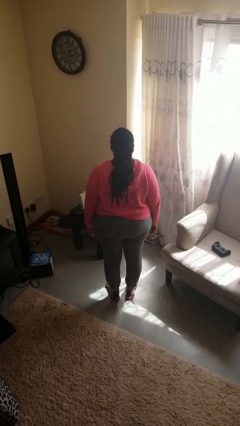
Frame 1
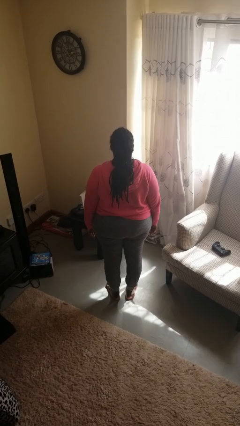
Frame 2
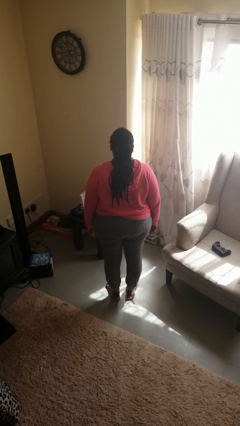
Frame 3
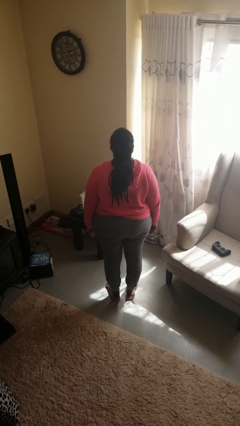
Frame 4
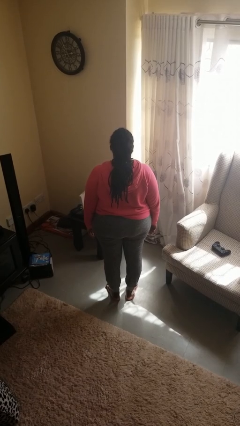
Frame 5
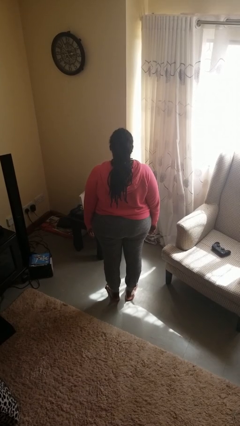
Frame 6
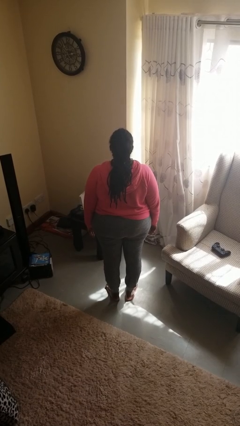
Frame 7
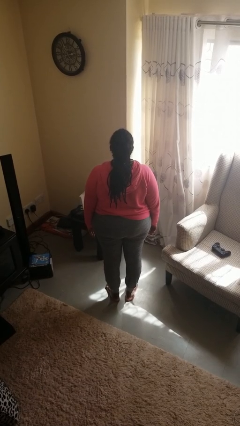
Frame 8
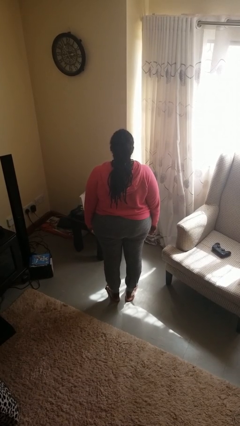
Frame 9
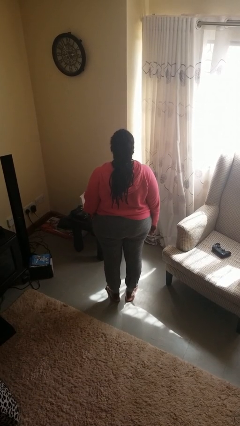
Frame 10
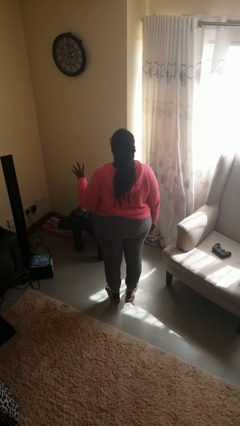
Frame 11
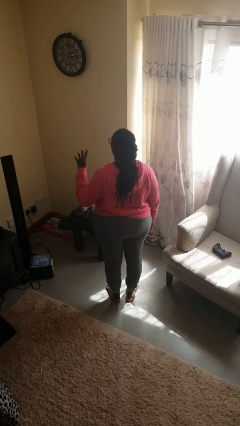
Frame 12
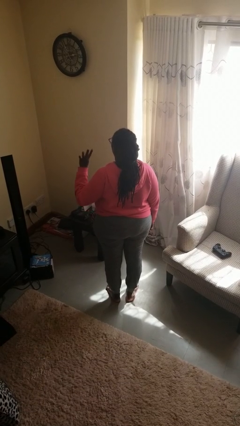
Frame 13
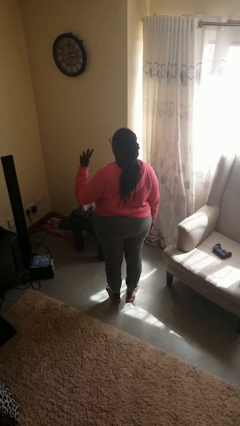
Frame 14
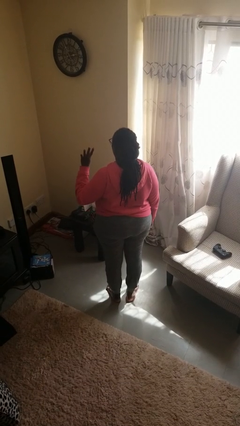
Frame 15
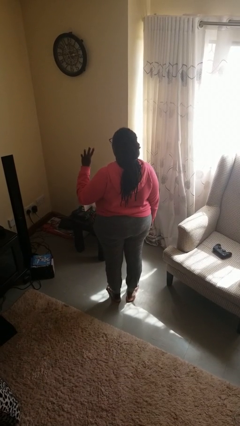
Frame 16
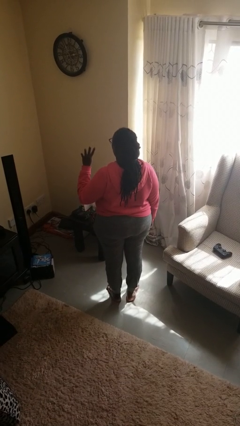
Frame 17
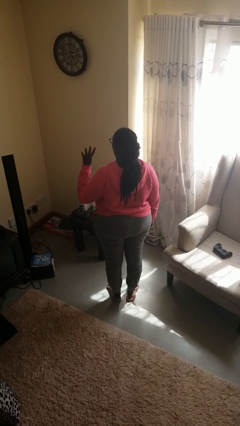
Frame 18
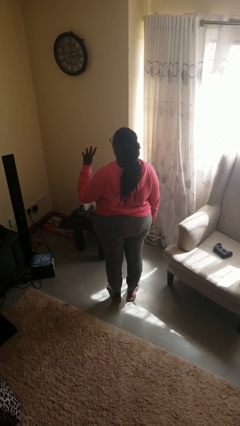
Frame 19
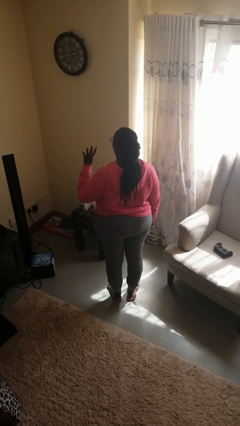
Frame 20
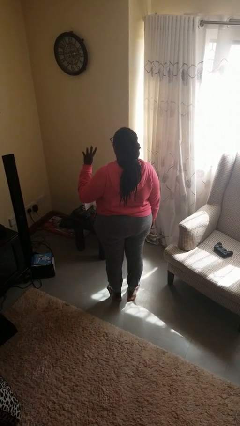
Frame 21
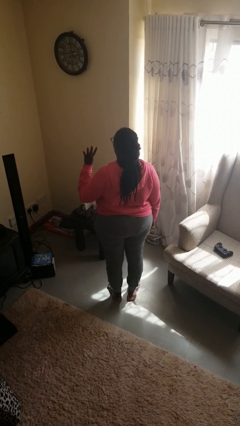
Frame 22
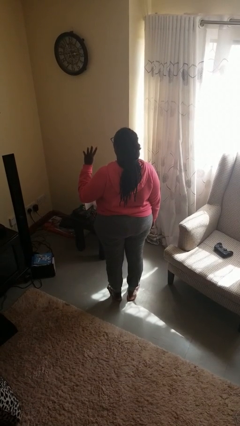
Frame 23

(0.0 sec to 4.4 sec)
person gestures number four

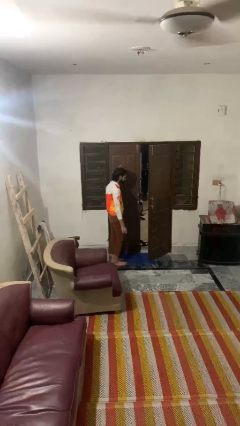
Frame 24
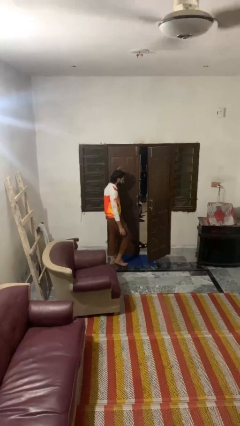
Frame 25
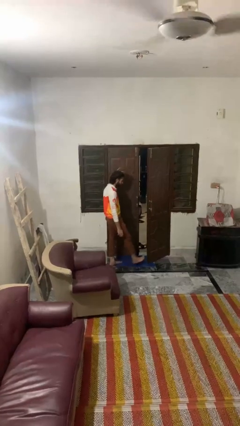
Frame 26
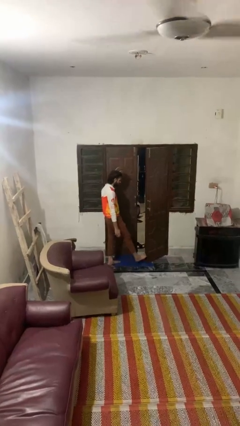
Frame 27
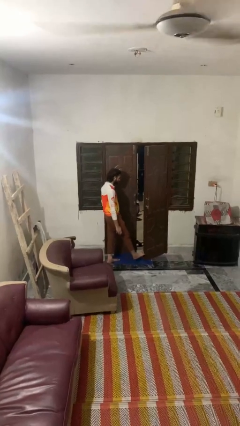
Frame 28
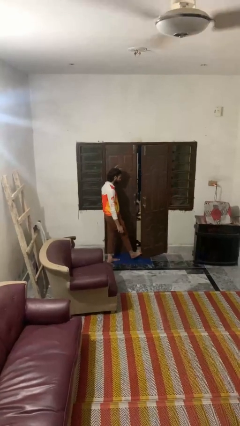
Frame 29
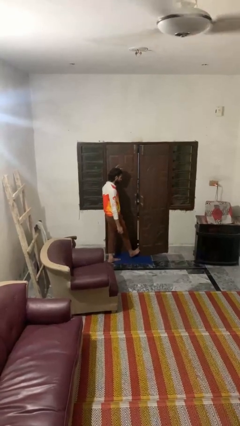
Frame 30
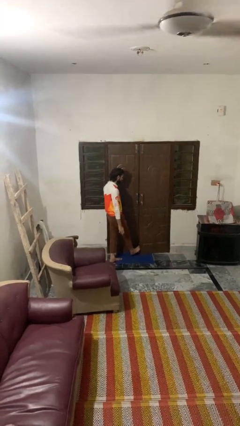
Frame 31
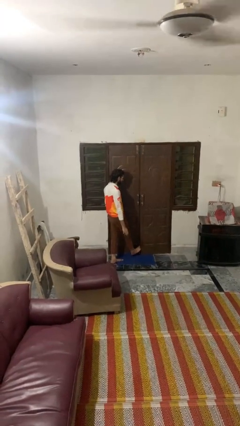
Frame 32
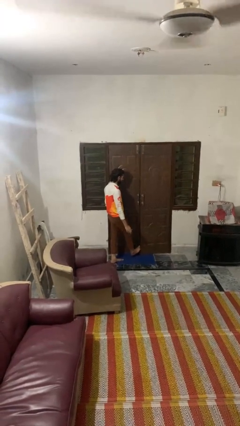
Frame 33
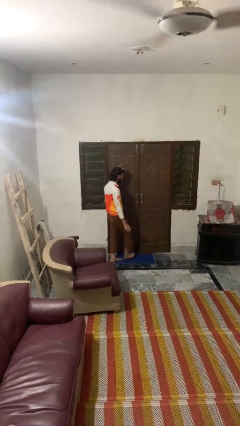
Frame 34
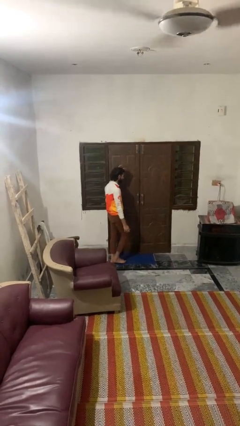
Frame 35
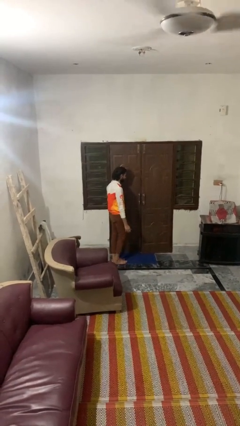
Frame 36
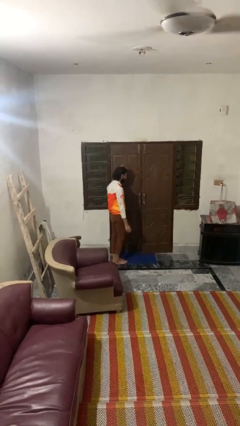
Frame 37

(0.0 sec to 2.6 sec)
person closes door with foot

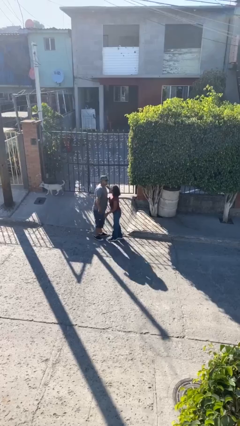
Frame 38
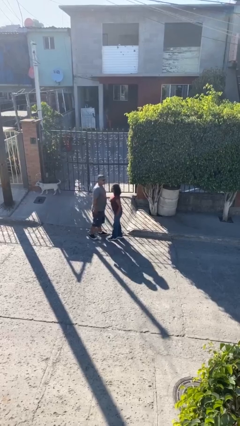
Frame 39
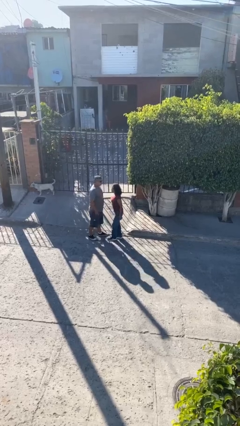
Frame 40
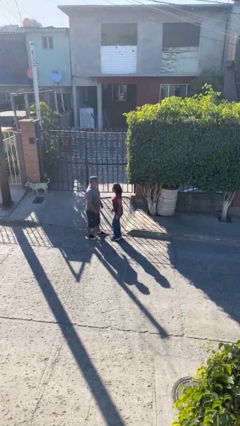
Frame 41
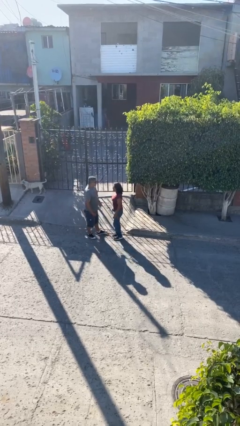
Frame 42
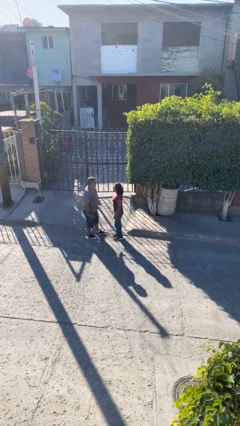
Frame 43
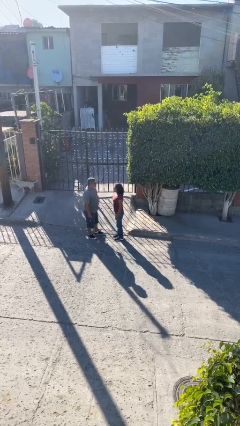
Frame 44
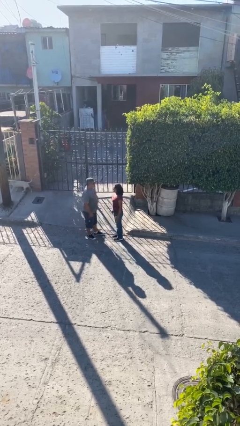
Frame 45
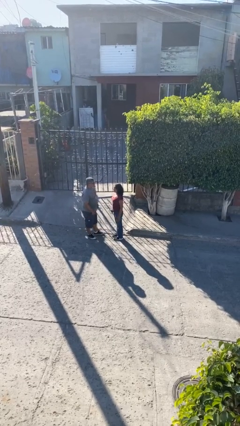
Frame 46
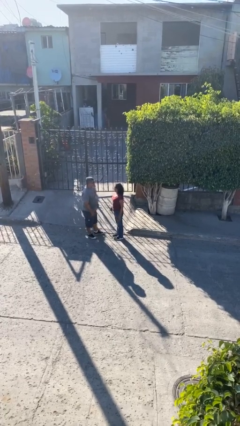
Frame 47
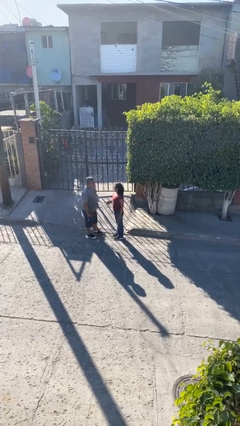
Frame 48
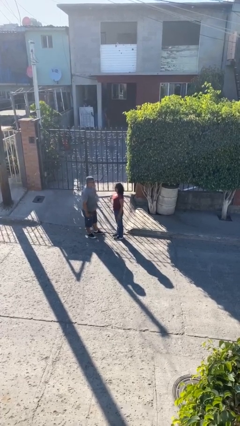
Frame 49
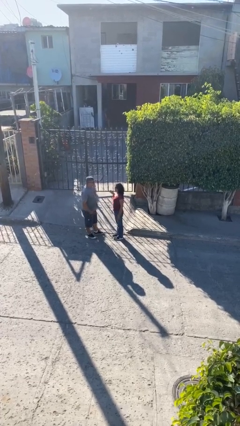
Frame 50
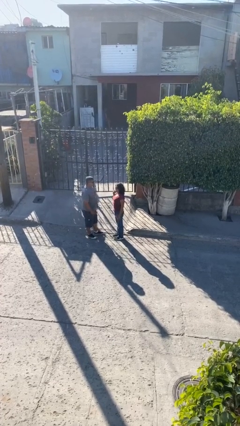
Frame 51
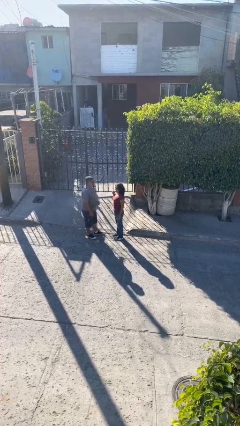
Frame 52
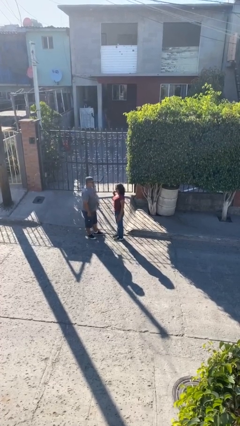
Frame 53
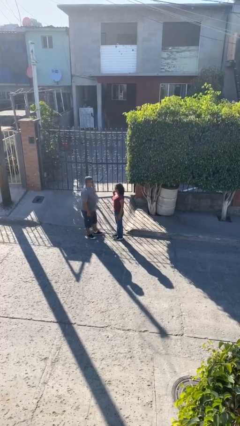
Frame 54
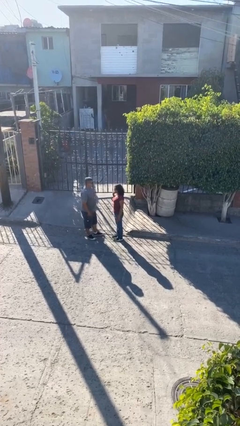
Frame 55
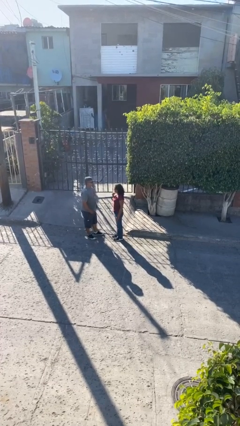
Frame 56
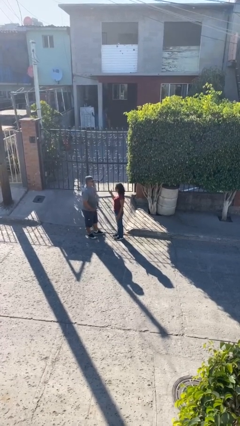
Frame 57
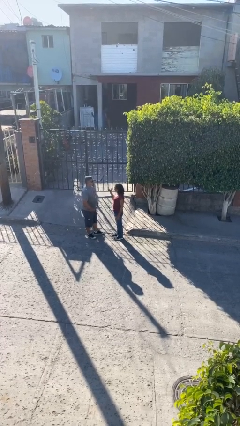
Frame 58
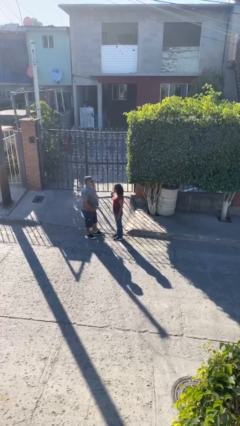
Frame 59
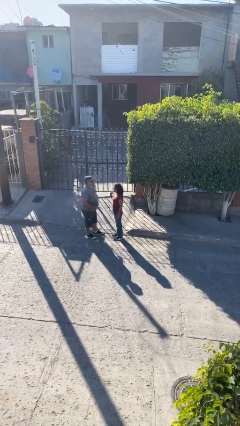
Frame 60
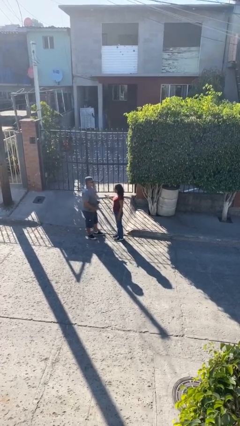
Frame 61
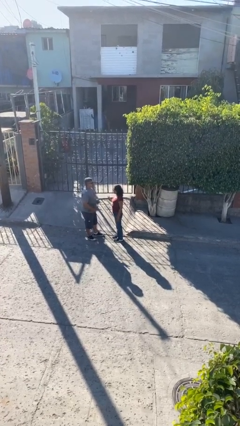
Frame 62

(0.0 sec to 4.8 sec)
person talks to person

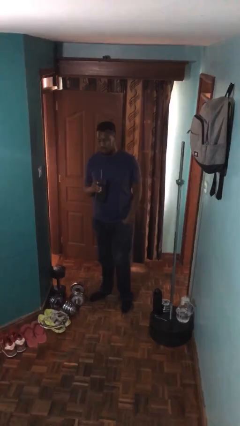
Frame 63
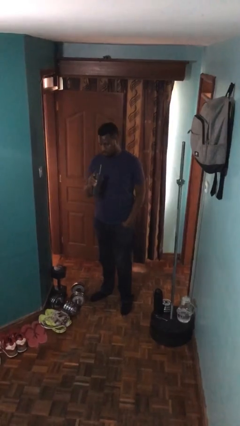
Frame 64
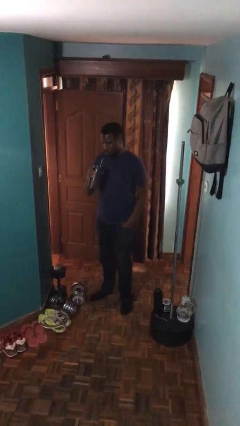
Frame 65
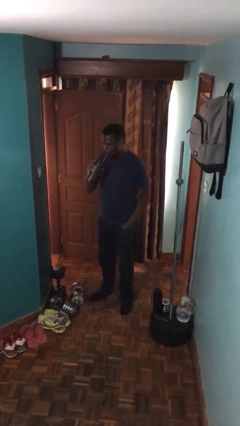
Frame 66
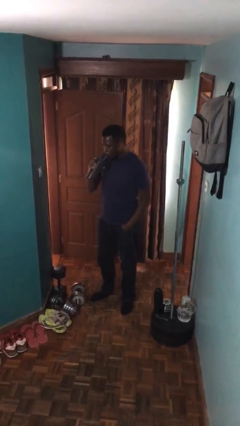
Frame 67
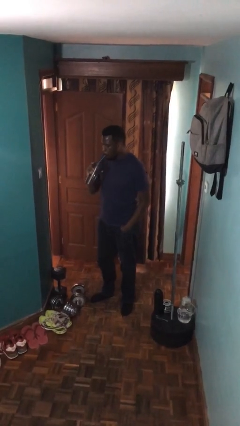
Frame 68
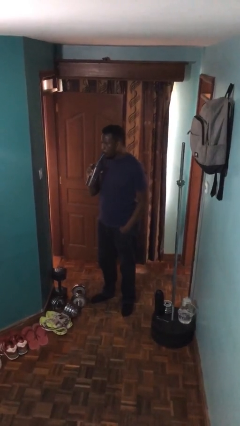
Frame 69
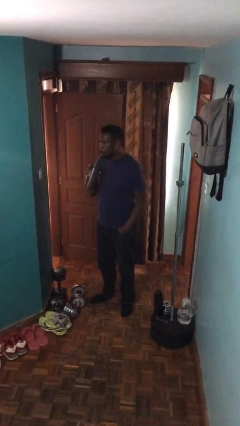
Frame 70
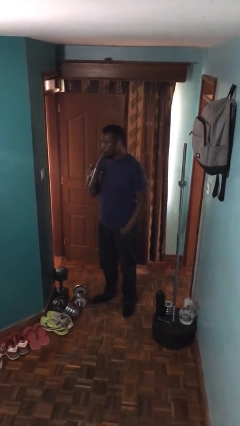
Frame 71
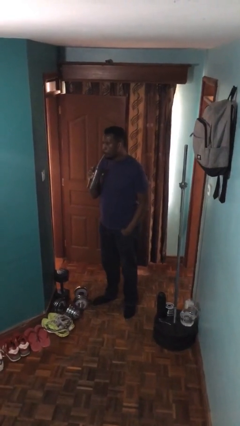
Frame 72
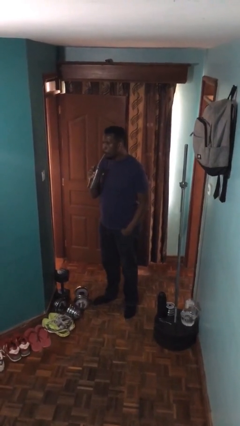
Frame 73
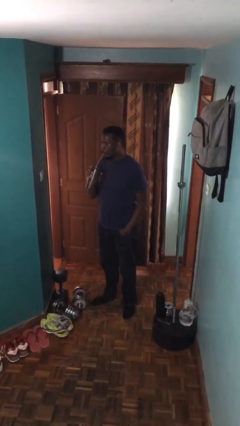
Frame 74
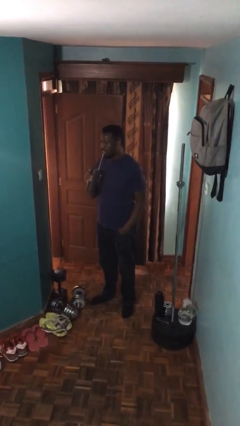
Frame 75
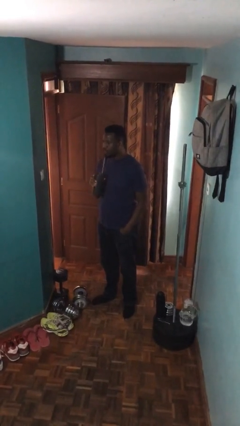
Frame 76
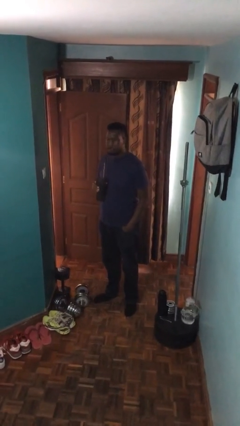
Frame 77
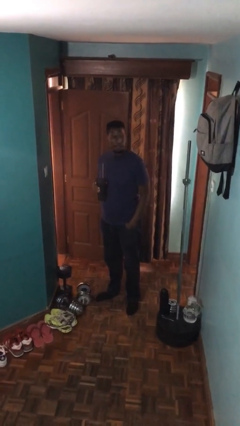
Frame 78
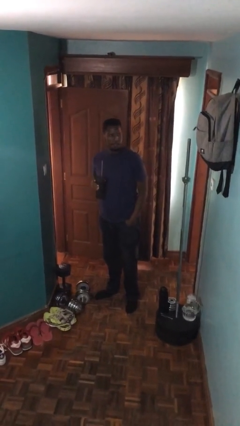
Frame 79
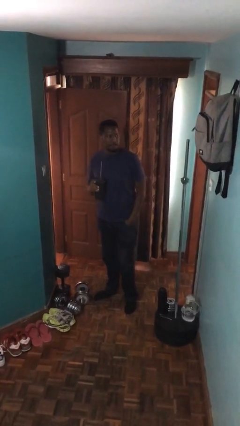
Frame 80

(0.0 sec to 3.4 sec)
person drinks from straw

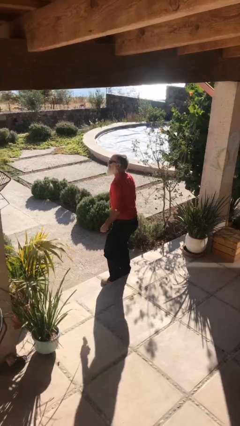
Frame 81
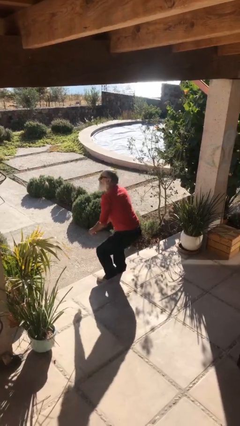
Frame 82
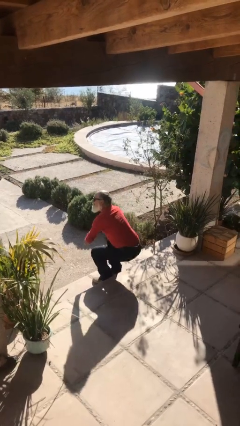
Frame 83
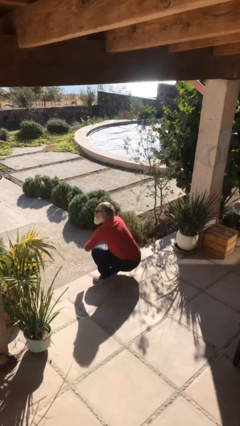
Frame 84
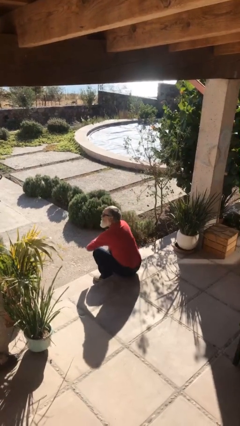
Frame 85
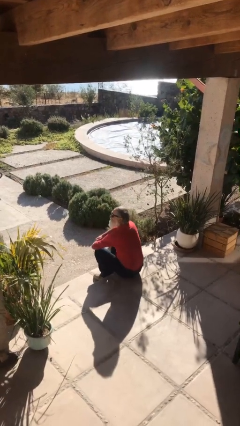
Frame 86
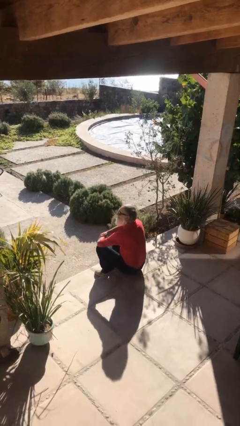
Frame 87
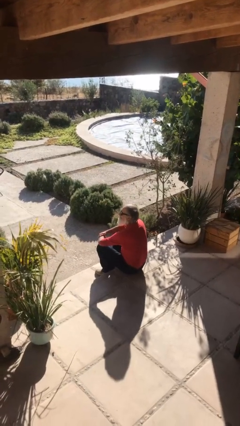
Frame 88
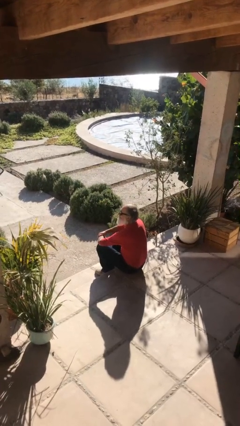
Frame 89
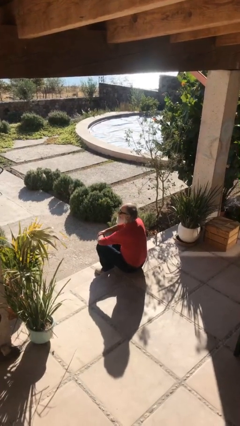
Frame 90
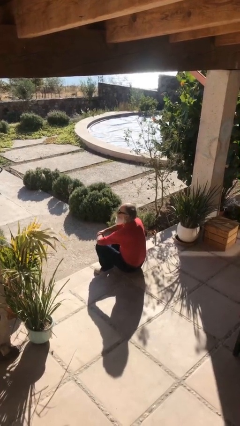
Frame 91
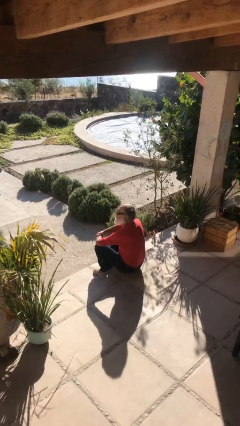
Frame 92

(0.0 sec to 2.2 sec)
person sits down
